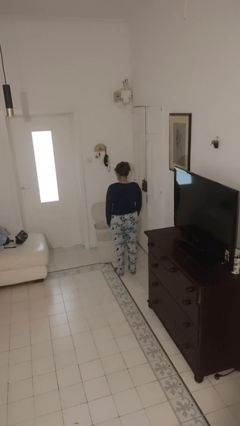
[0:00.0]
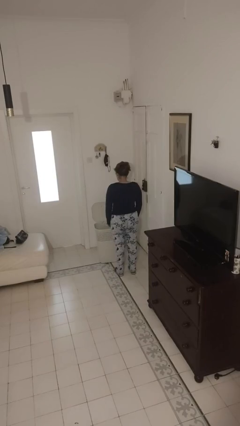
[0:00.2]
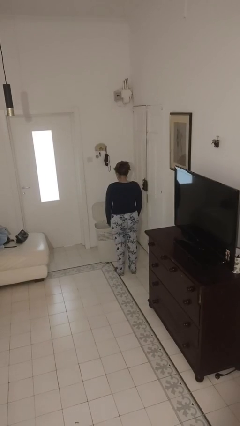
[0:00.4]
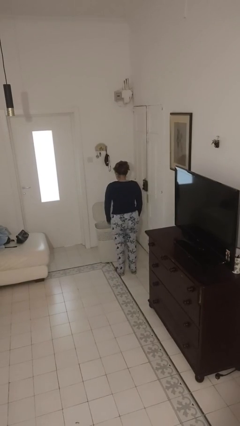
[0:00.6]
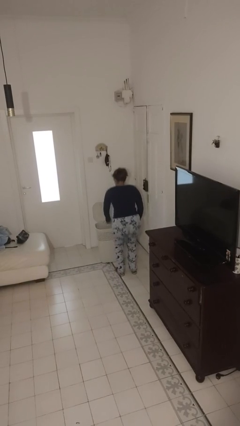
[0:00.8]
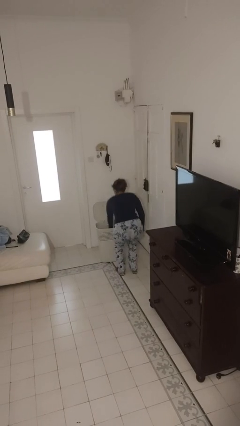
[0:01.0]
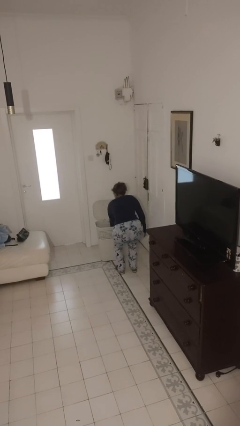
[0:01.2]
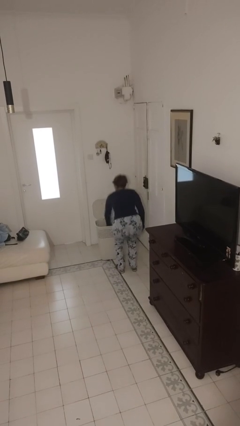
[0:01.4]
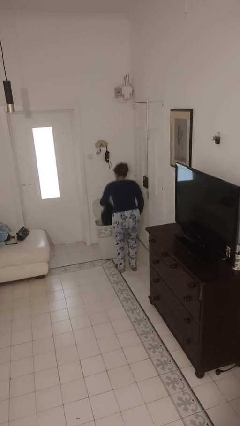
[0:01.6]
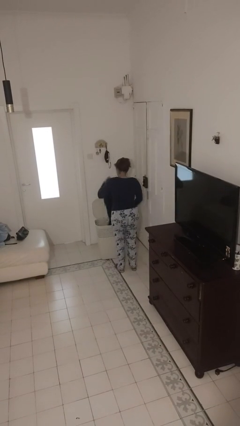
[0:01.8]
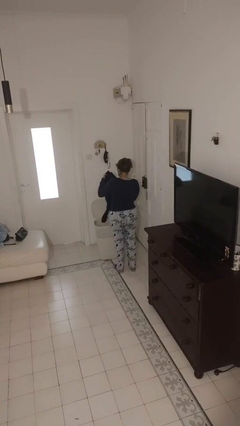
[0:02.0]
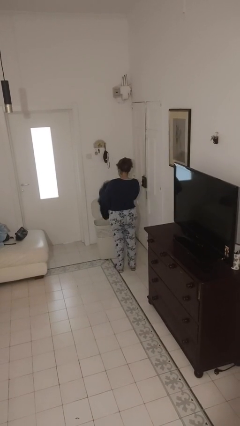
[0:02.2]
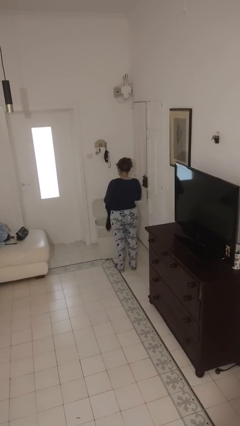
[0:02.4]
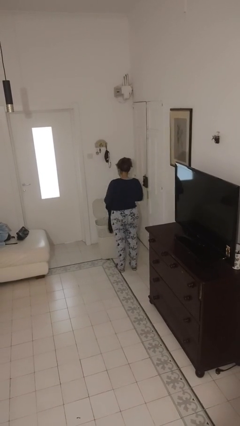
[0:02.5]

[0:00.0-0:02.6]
person takes object from basket

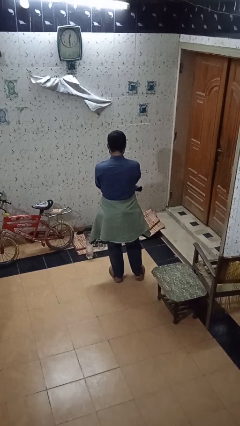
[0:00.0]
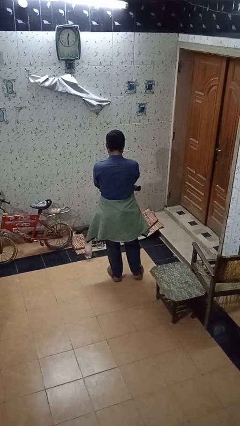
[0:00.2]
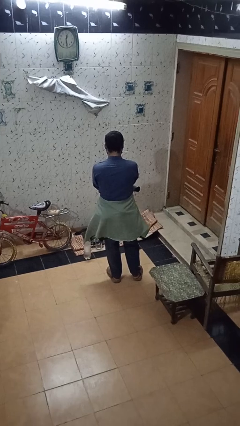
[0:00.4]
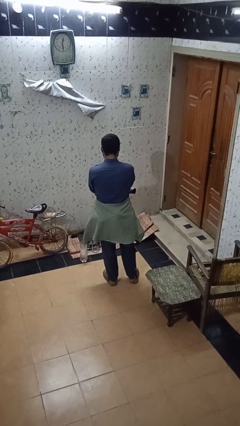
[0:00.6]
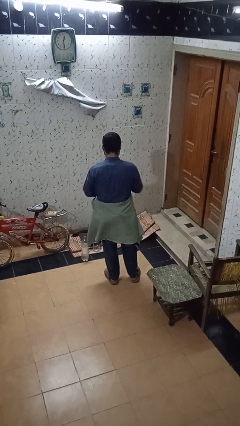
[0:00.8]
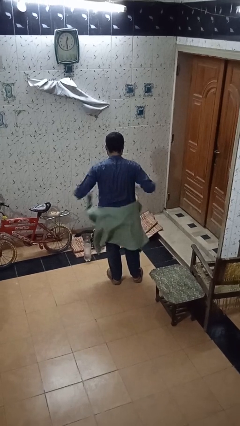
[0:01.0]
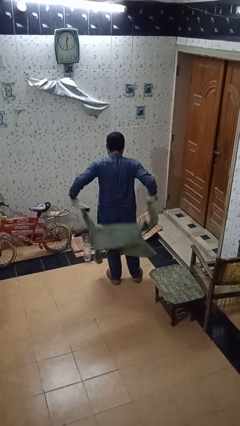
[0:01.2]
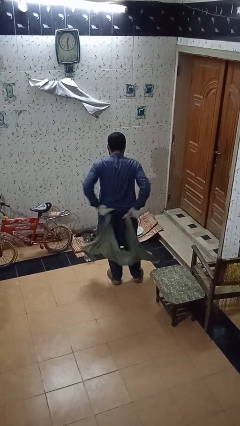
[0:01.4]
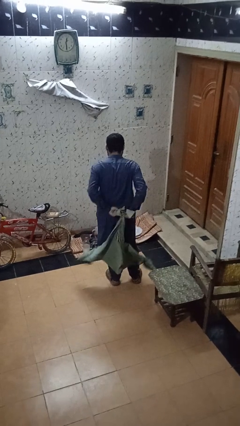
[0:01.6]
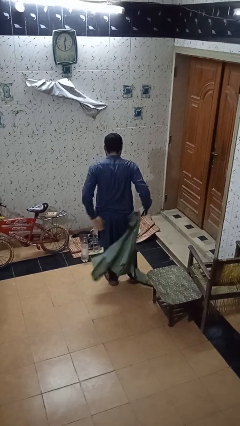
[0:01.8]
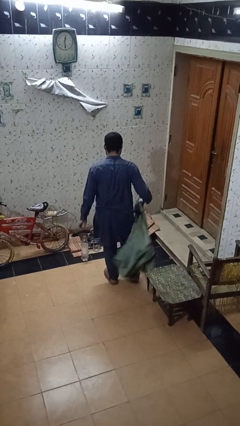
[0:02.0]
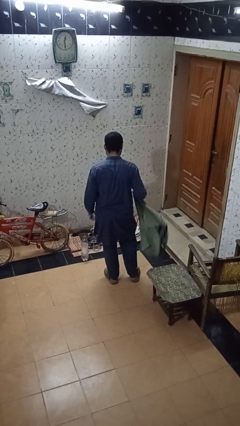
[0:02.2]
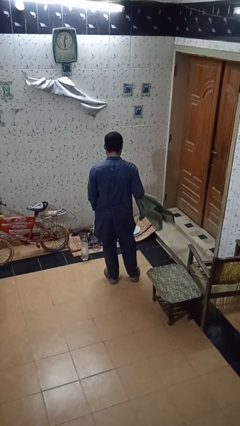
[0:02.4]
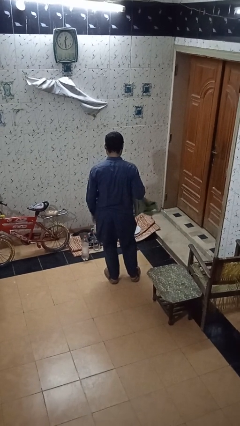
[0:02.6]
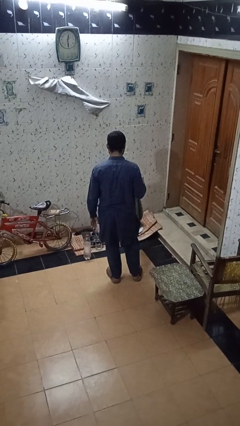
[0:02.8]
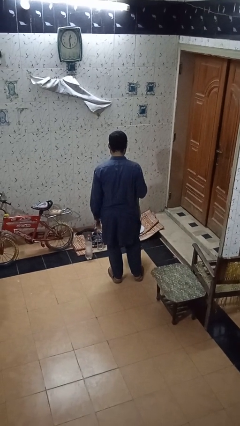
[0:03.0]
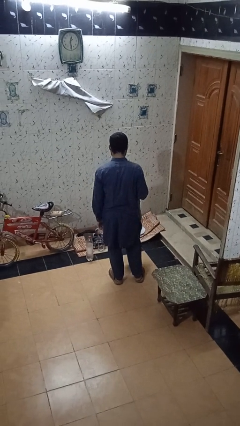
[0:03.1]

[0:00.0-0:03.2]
person unties jacket around waist

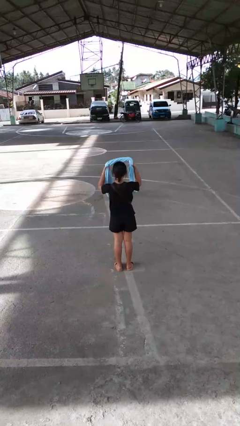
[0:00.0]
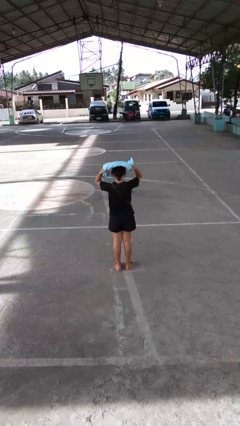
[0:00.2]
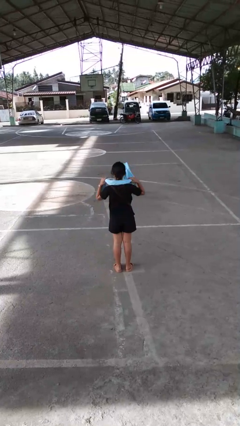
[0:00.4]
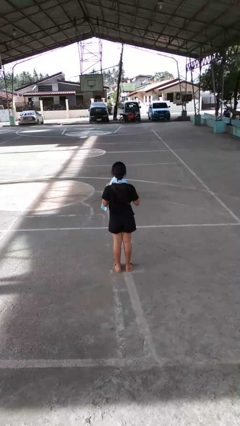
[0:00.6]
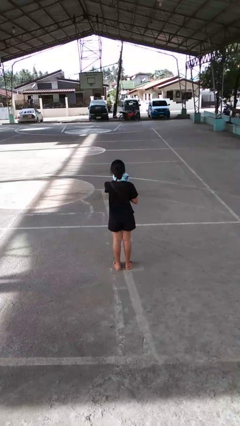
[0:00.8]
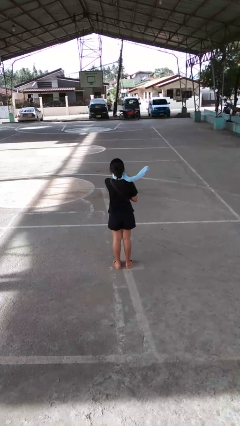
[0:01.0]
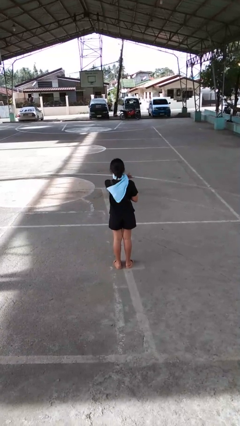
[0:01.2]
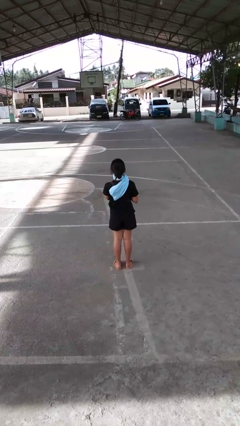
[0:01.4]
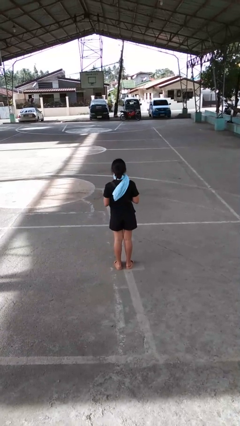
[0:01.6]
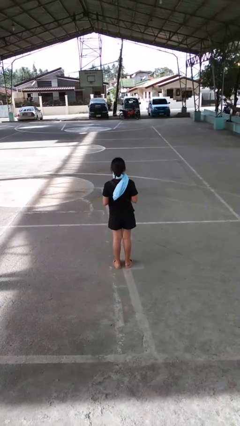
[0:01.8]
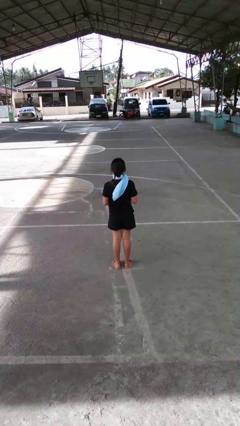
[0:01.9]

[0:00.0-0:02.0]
person puts on scarf

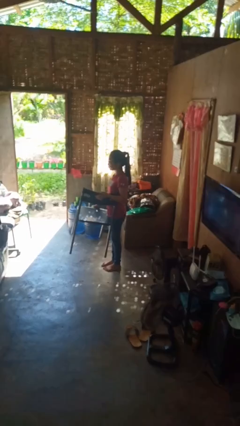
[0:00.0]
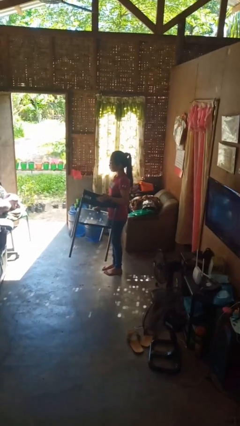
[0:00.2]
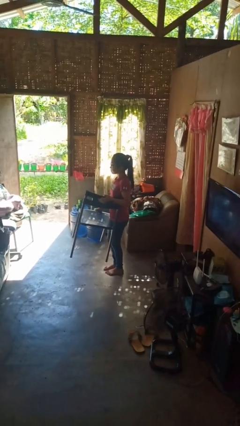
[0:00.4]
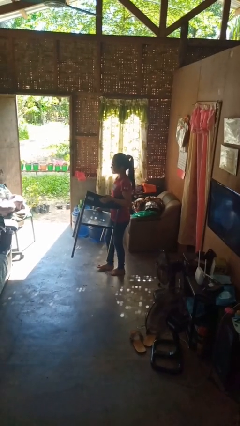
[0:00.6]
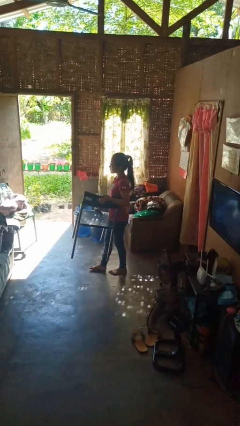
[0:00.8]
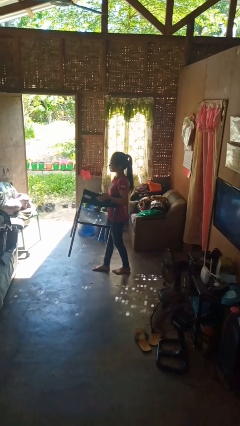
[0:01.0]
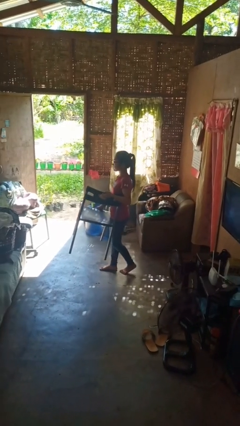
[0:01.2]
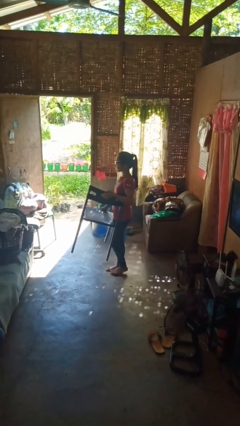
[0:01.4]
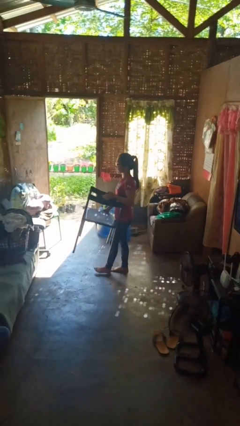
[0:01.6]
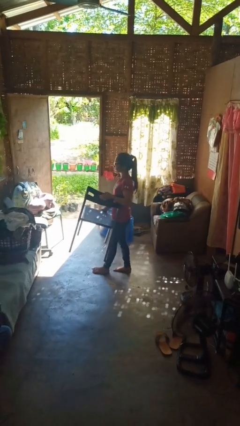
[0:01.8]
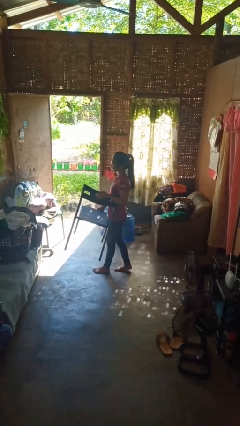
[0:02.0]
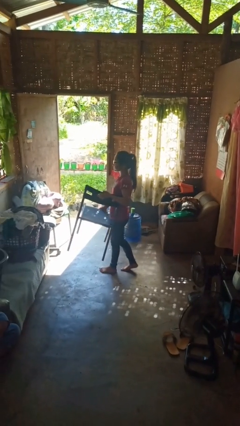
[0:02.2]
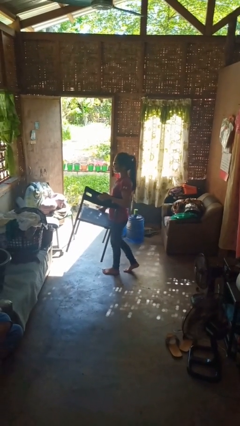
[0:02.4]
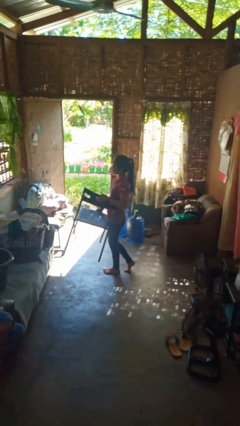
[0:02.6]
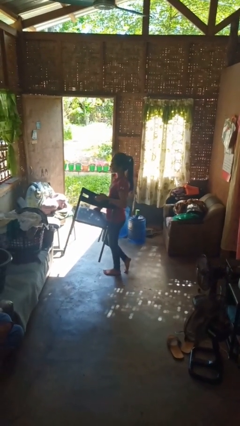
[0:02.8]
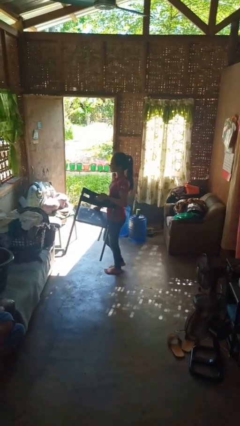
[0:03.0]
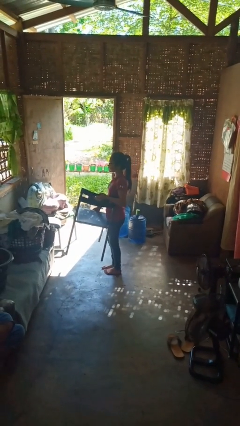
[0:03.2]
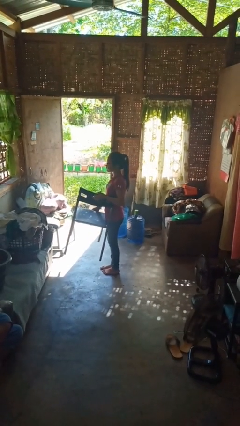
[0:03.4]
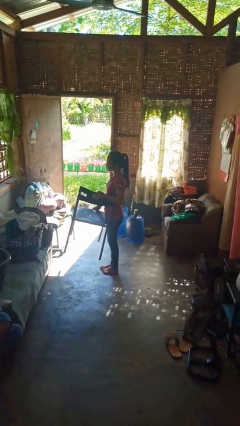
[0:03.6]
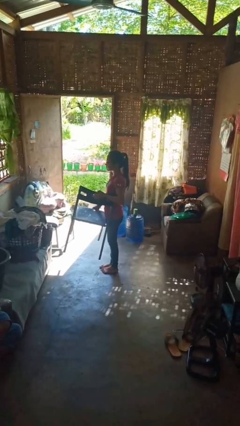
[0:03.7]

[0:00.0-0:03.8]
person carries furniture

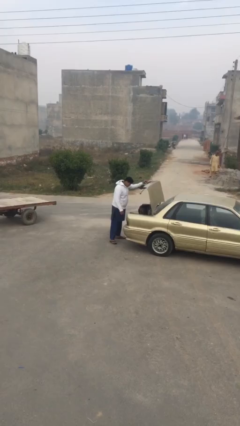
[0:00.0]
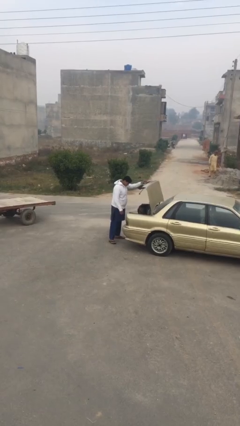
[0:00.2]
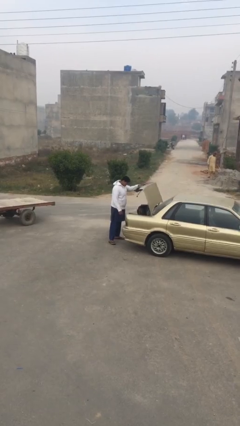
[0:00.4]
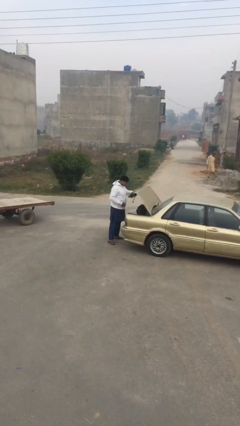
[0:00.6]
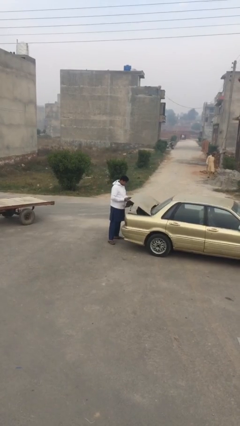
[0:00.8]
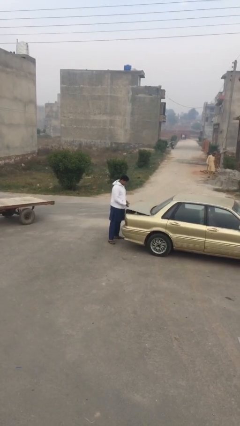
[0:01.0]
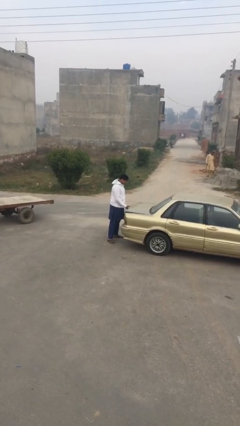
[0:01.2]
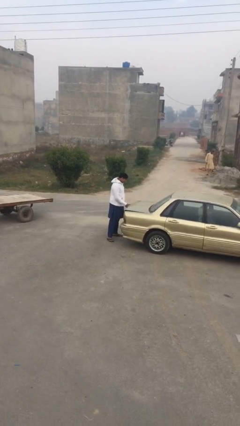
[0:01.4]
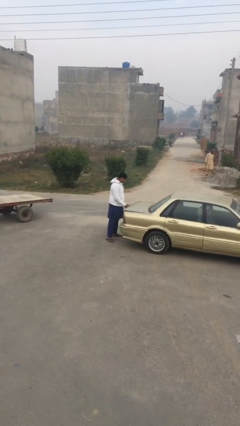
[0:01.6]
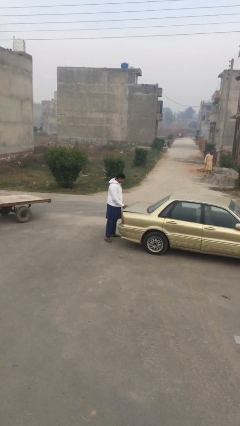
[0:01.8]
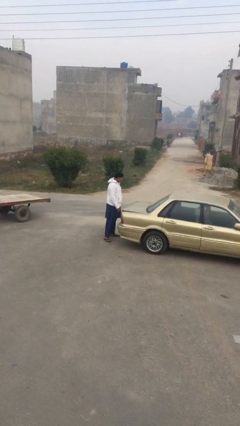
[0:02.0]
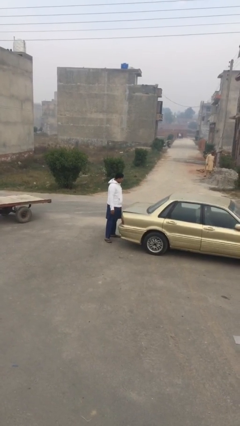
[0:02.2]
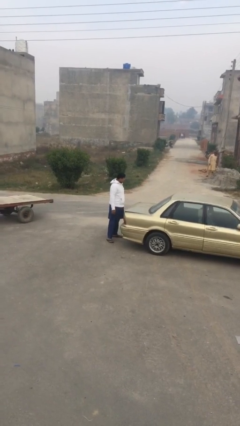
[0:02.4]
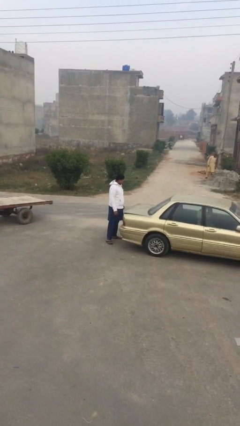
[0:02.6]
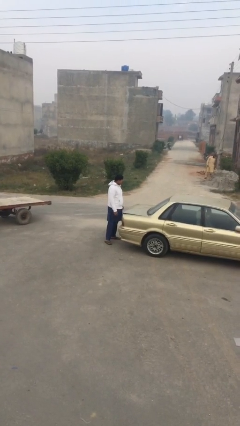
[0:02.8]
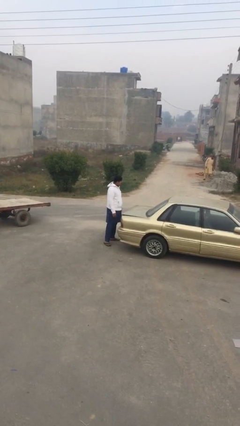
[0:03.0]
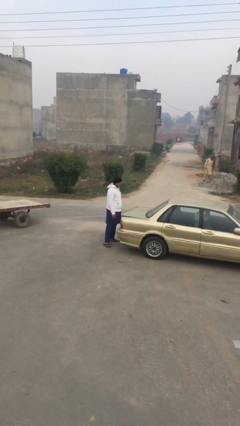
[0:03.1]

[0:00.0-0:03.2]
person closes car trunk

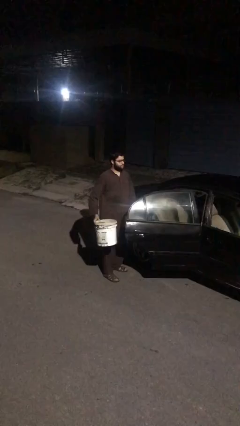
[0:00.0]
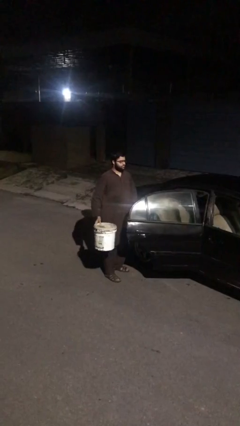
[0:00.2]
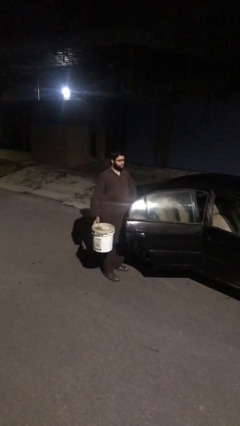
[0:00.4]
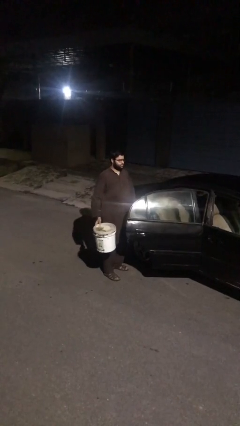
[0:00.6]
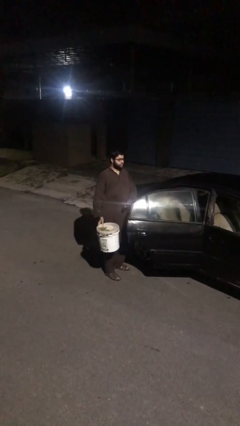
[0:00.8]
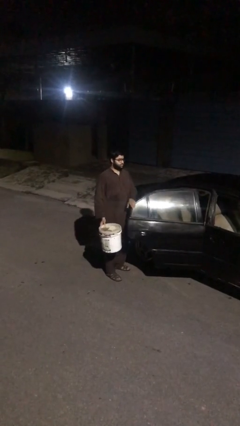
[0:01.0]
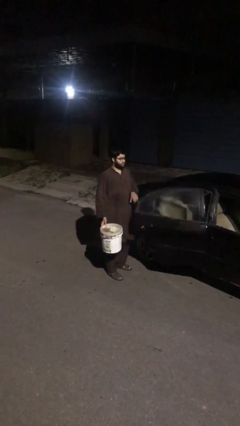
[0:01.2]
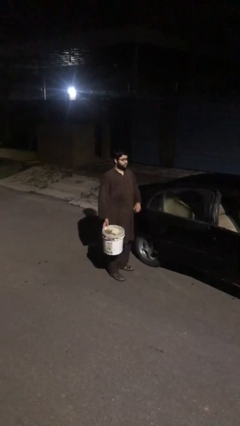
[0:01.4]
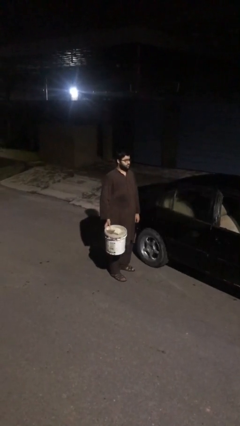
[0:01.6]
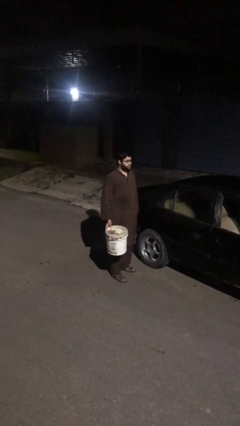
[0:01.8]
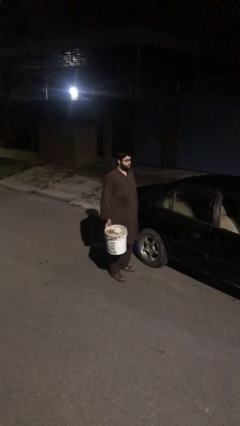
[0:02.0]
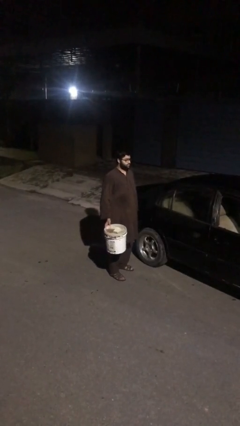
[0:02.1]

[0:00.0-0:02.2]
person closes car door

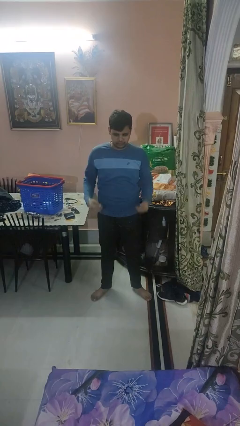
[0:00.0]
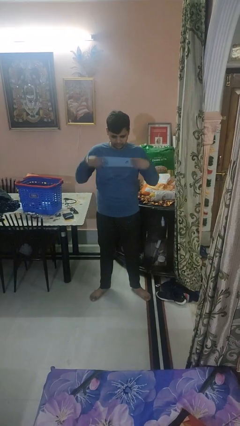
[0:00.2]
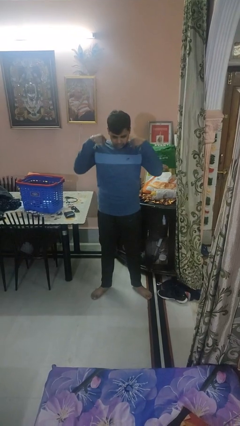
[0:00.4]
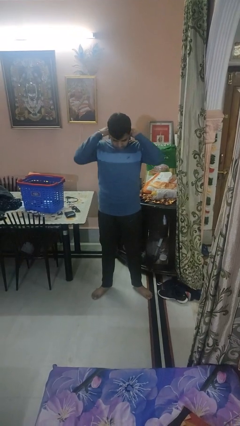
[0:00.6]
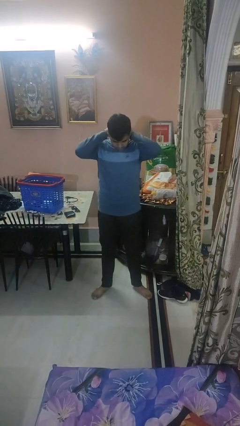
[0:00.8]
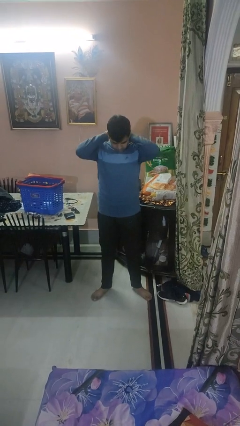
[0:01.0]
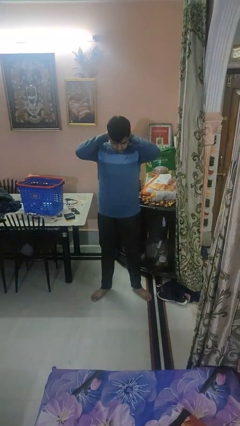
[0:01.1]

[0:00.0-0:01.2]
person puts on necklace
